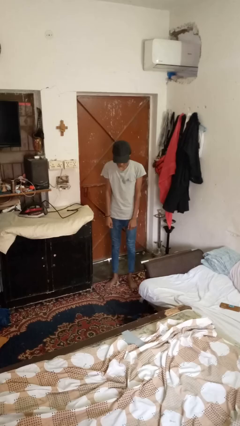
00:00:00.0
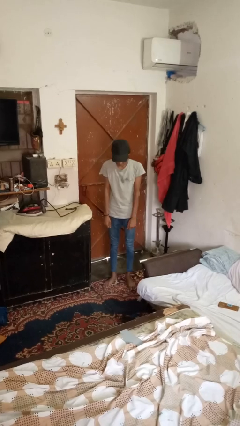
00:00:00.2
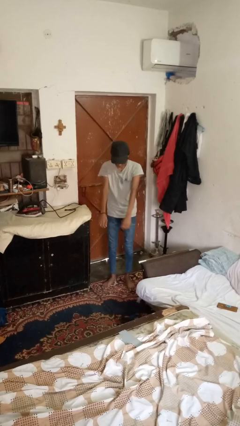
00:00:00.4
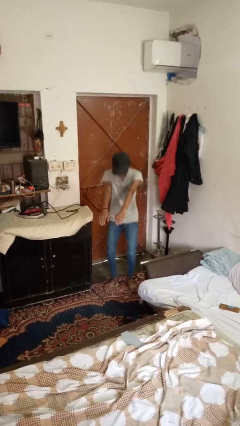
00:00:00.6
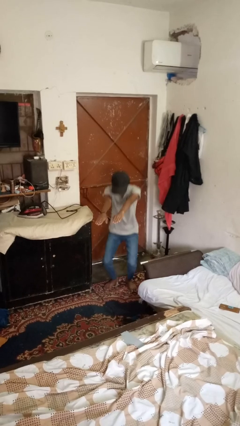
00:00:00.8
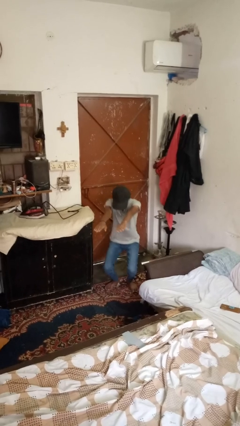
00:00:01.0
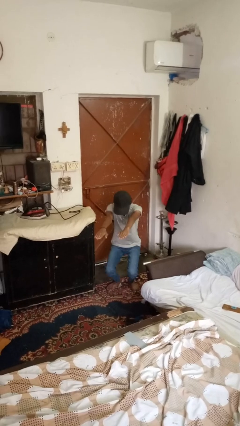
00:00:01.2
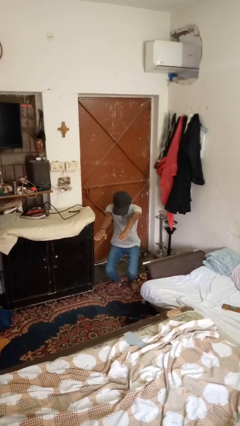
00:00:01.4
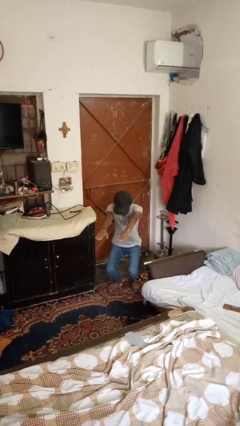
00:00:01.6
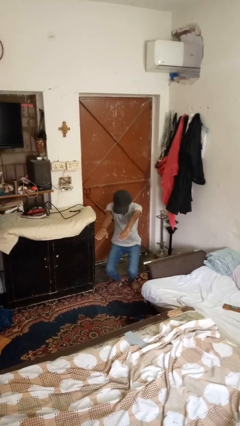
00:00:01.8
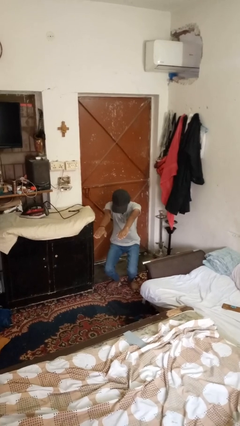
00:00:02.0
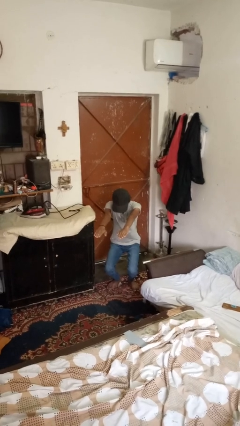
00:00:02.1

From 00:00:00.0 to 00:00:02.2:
person squats

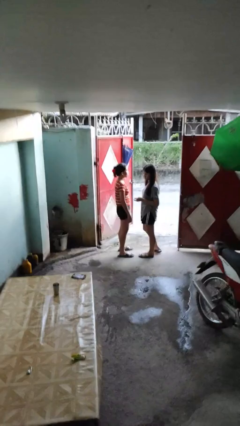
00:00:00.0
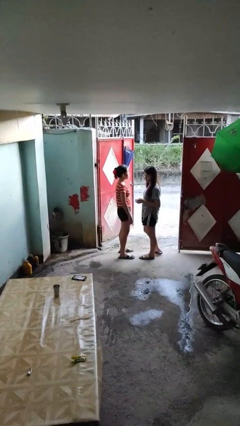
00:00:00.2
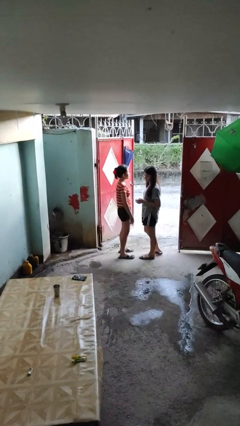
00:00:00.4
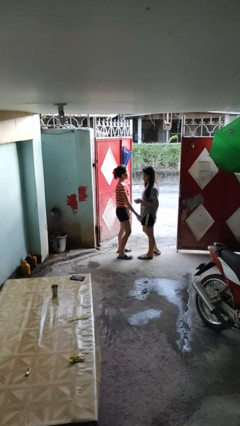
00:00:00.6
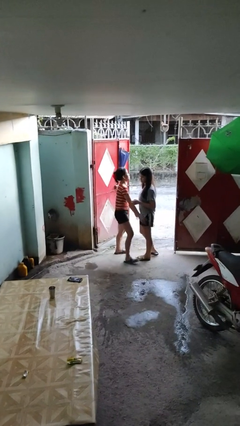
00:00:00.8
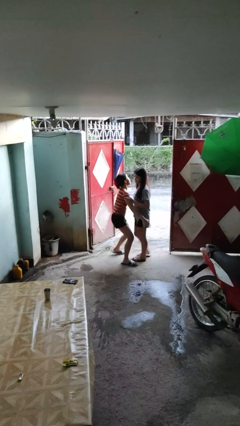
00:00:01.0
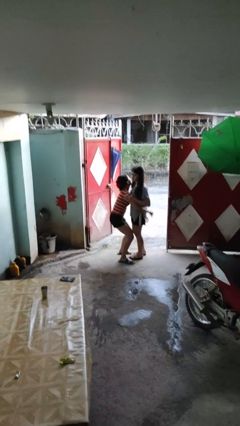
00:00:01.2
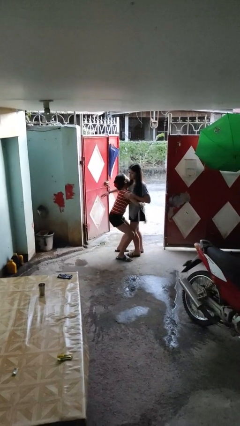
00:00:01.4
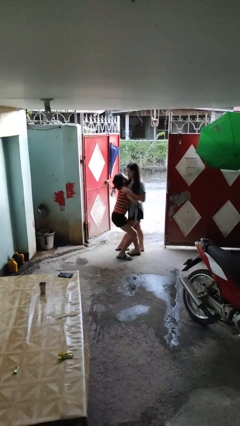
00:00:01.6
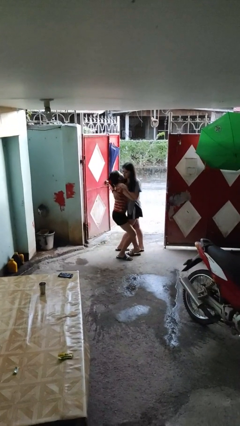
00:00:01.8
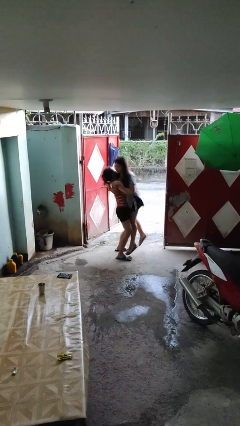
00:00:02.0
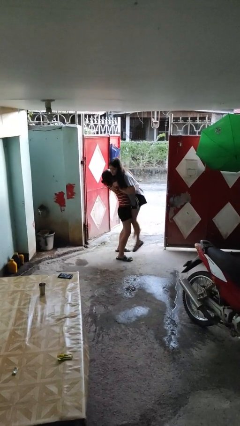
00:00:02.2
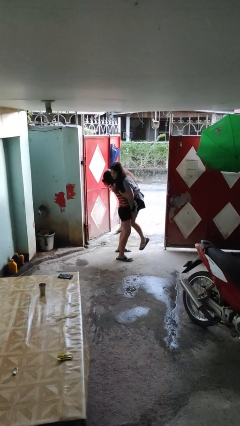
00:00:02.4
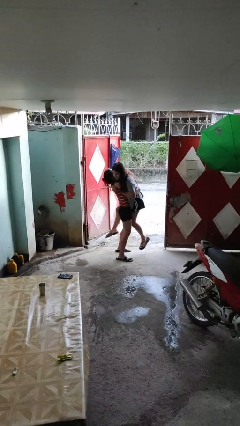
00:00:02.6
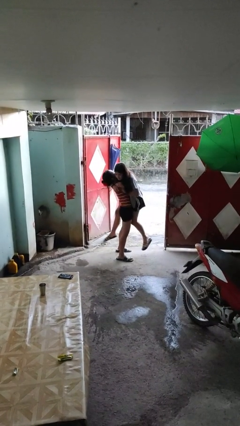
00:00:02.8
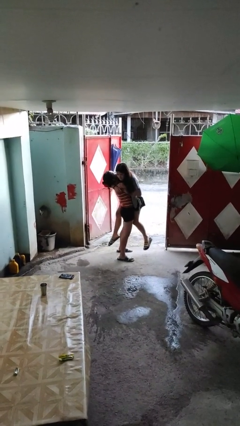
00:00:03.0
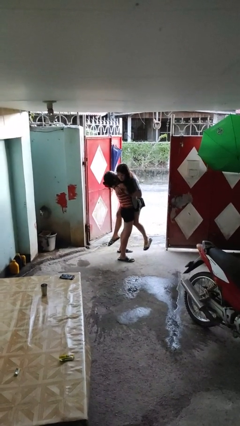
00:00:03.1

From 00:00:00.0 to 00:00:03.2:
person picks up person

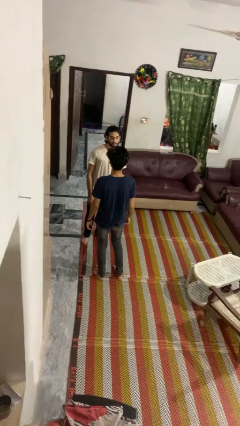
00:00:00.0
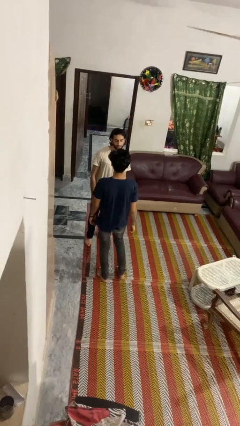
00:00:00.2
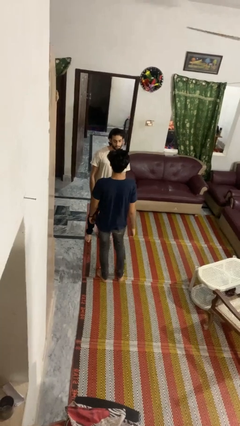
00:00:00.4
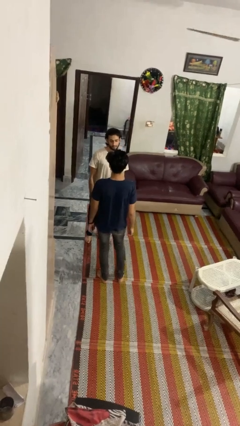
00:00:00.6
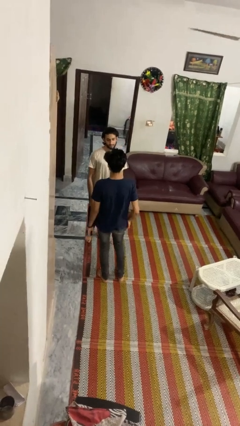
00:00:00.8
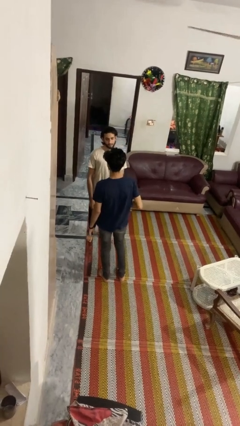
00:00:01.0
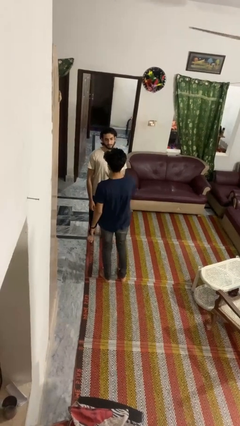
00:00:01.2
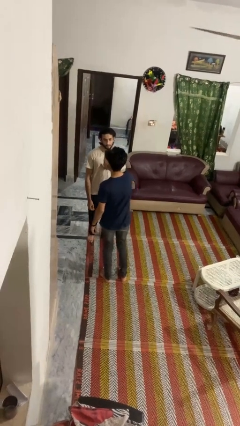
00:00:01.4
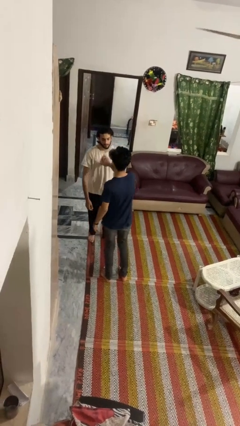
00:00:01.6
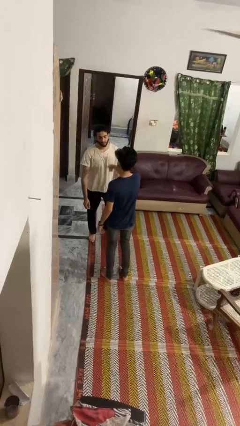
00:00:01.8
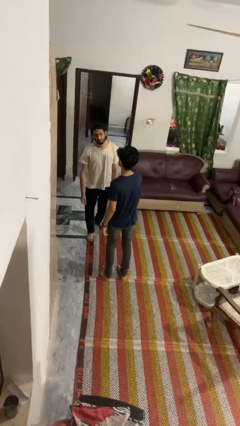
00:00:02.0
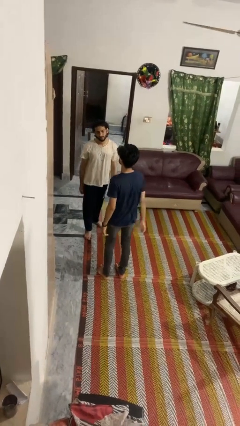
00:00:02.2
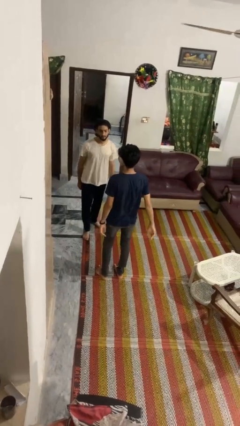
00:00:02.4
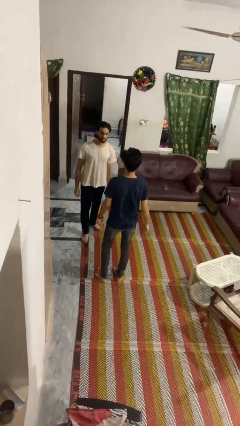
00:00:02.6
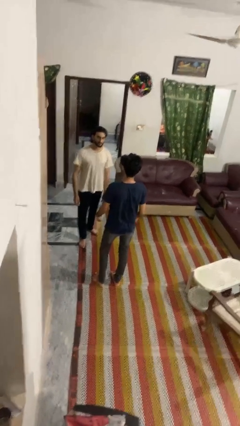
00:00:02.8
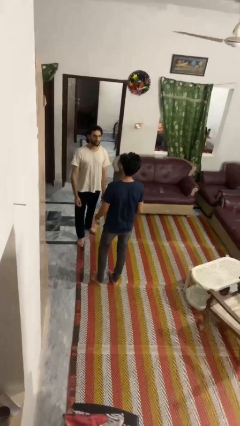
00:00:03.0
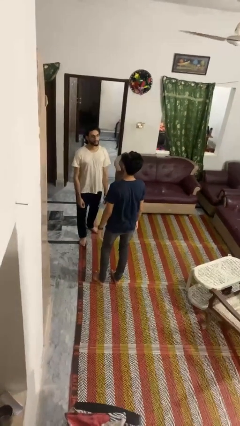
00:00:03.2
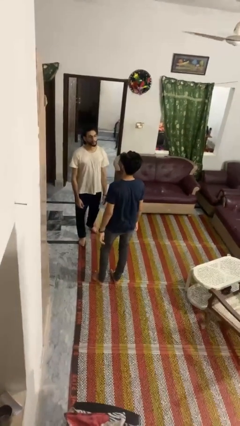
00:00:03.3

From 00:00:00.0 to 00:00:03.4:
person shoves person

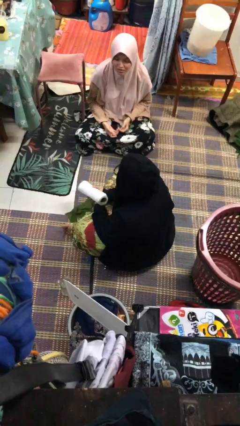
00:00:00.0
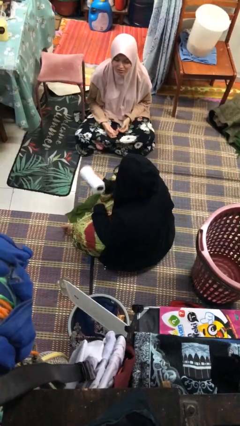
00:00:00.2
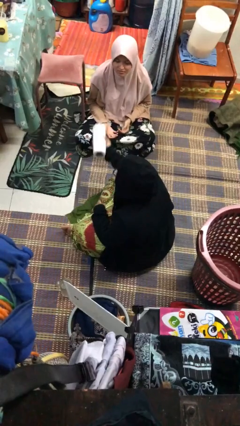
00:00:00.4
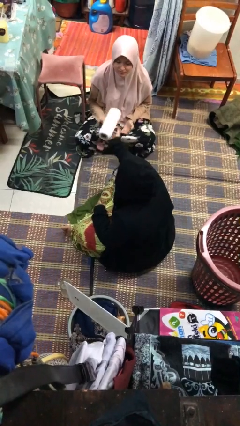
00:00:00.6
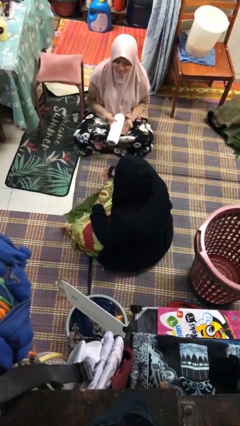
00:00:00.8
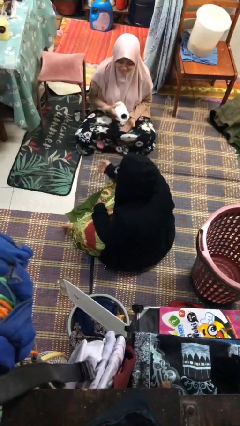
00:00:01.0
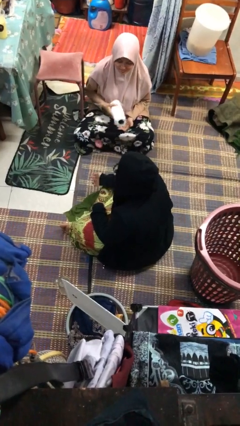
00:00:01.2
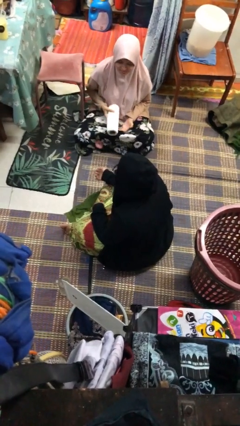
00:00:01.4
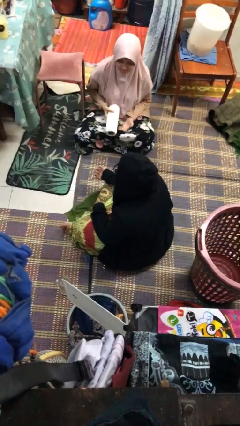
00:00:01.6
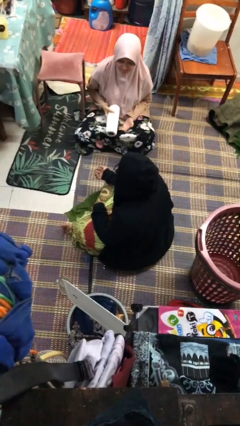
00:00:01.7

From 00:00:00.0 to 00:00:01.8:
person throws object to person

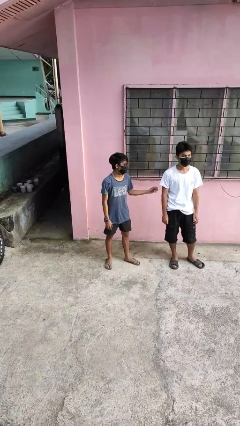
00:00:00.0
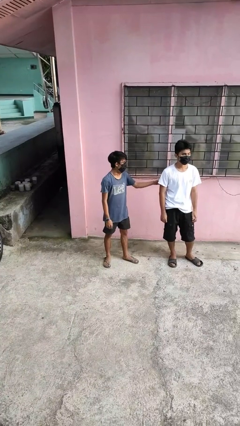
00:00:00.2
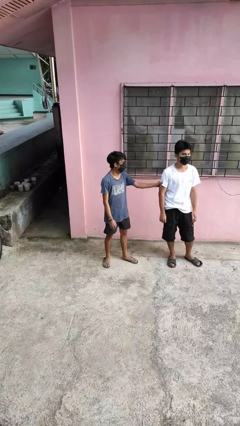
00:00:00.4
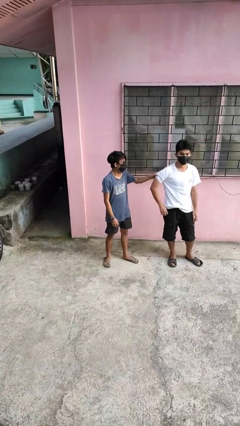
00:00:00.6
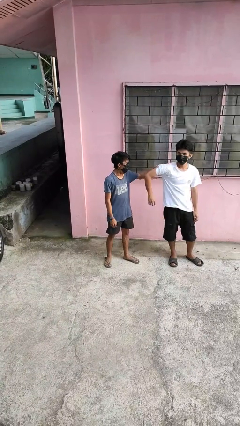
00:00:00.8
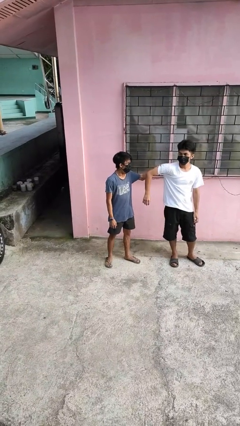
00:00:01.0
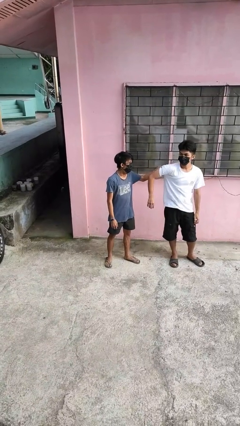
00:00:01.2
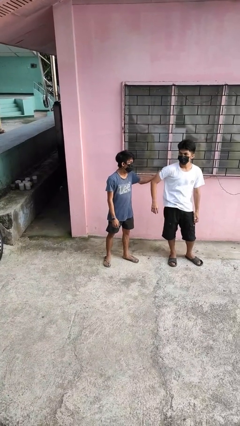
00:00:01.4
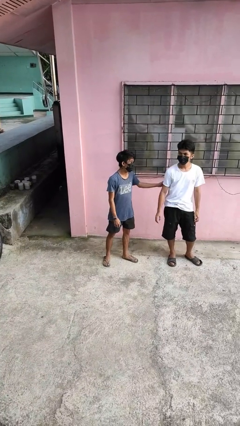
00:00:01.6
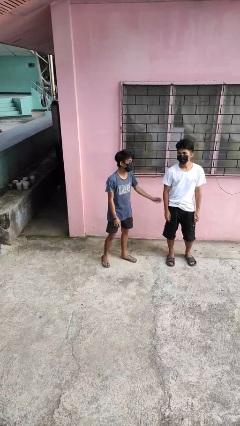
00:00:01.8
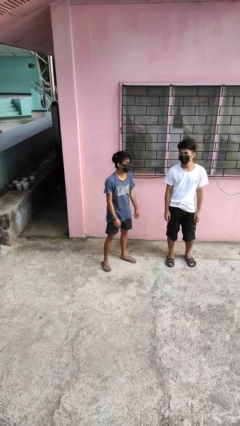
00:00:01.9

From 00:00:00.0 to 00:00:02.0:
person grabs person by bicep

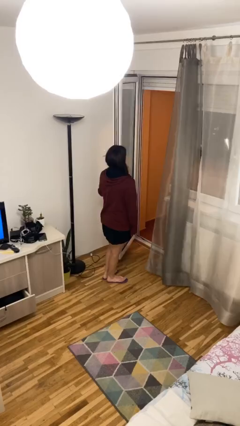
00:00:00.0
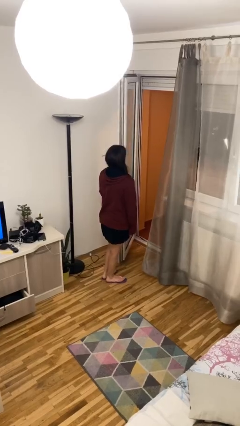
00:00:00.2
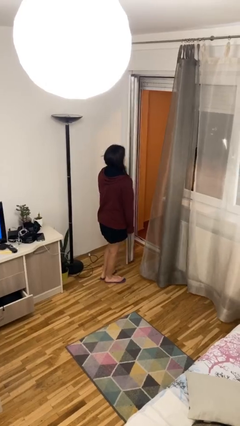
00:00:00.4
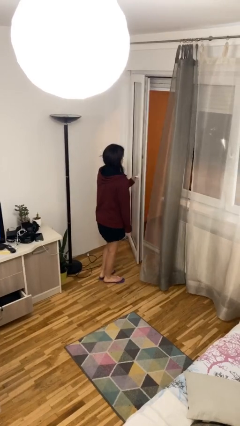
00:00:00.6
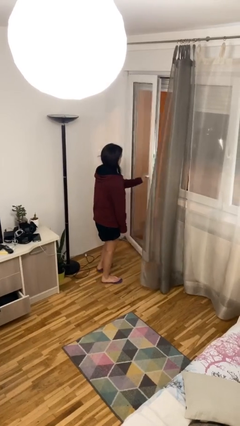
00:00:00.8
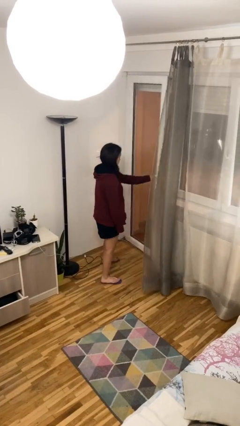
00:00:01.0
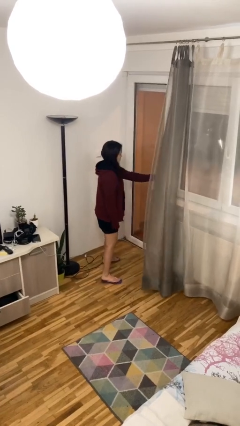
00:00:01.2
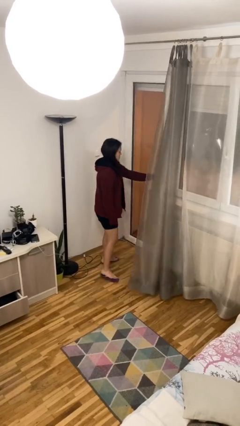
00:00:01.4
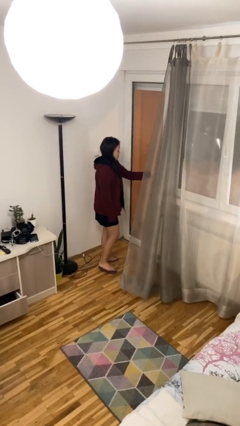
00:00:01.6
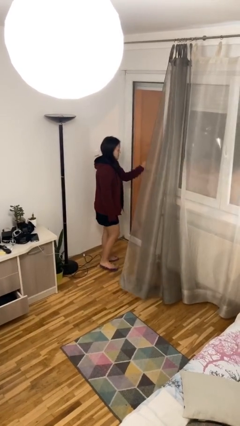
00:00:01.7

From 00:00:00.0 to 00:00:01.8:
person closes facility door

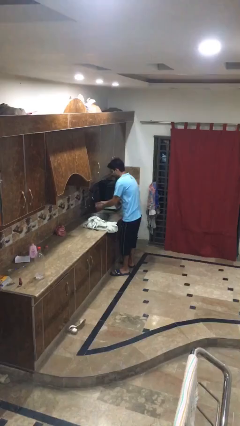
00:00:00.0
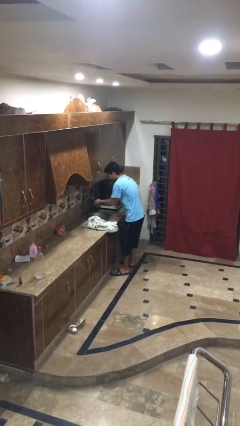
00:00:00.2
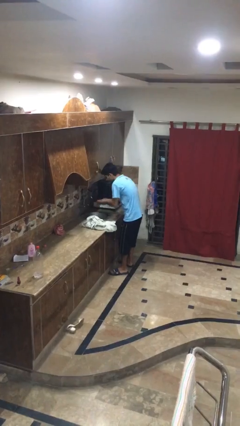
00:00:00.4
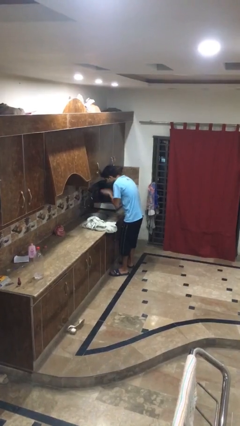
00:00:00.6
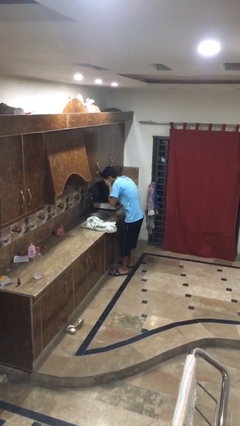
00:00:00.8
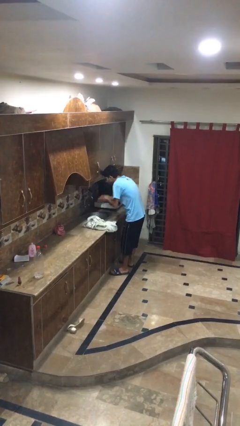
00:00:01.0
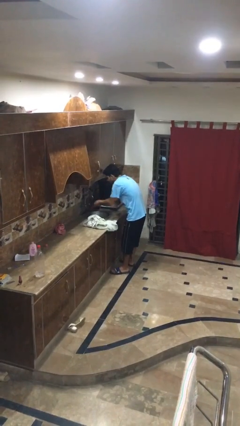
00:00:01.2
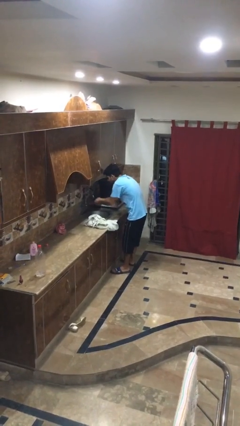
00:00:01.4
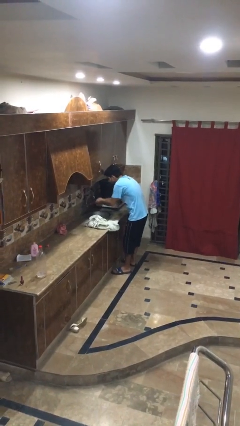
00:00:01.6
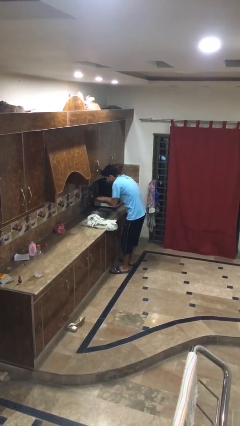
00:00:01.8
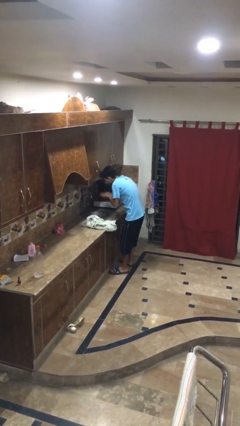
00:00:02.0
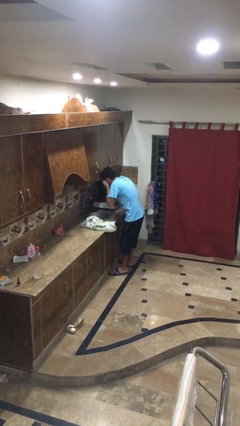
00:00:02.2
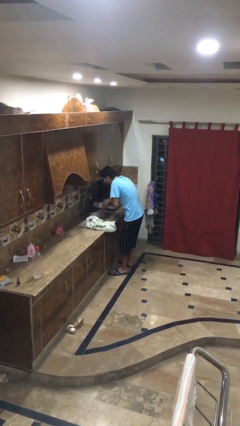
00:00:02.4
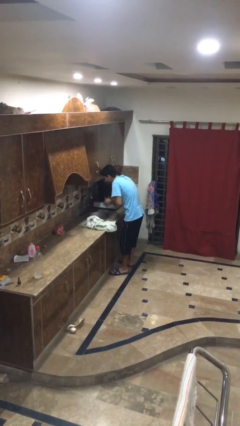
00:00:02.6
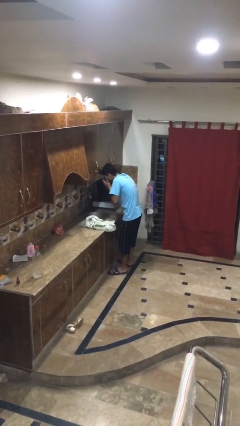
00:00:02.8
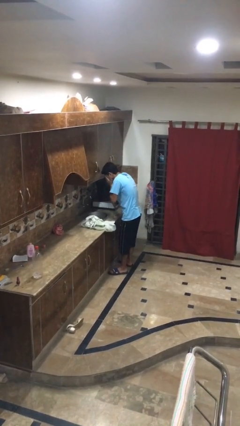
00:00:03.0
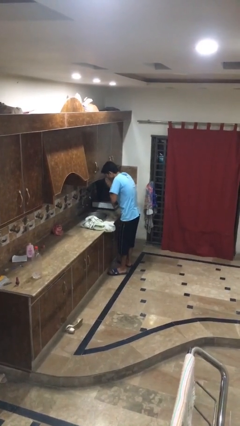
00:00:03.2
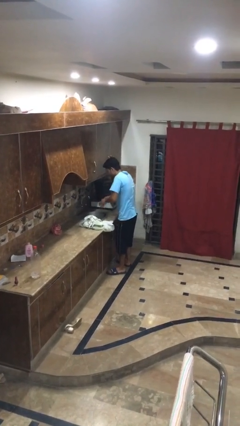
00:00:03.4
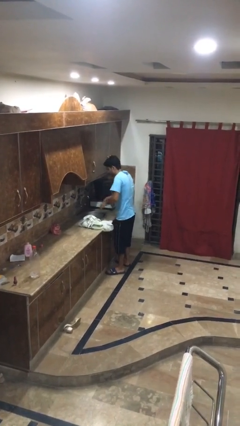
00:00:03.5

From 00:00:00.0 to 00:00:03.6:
person washes face
